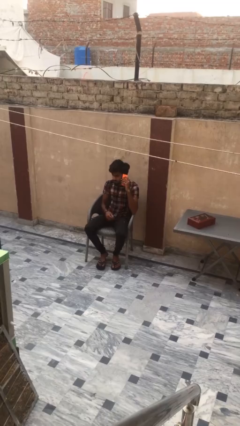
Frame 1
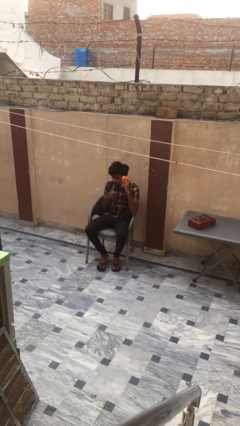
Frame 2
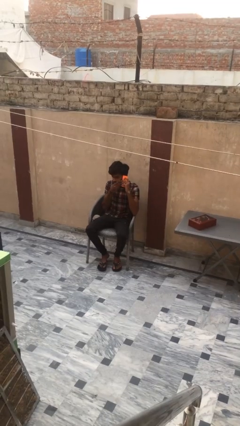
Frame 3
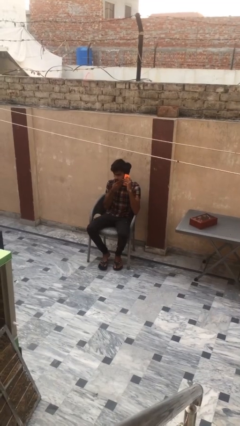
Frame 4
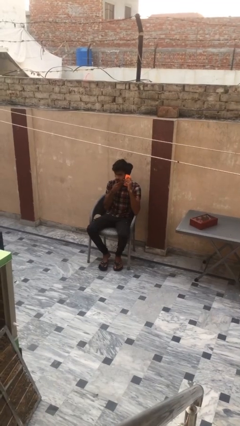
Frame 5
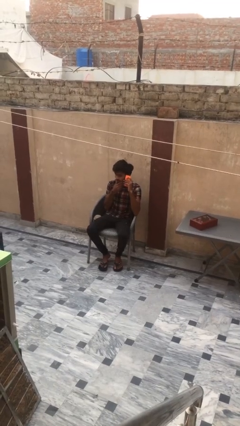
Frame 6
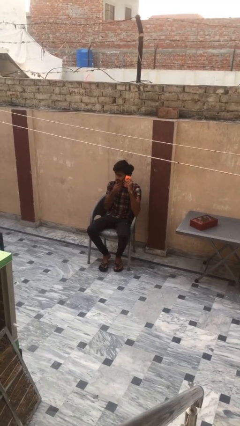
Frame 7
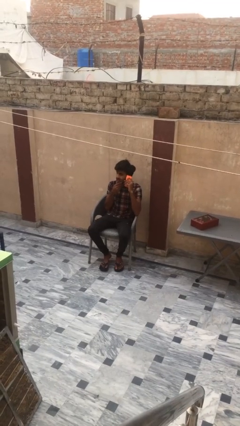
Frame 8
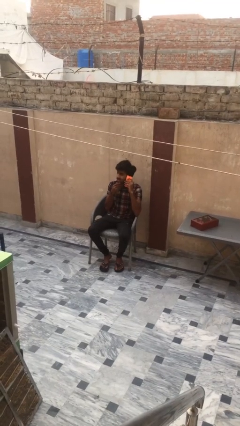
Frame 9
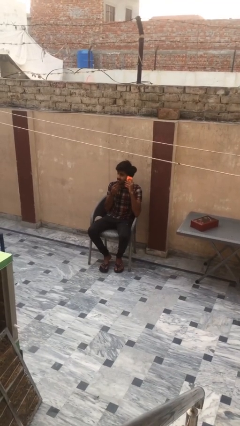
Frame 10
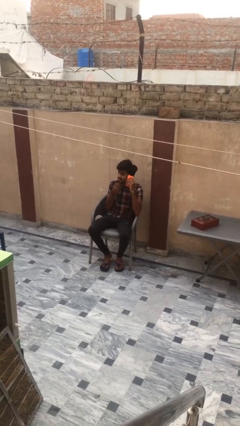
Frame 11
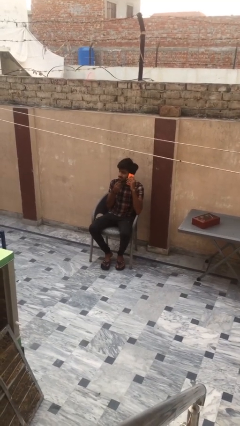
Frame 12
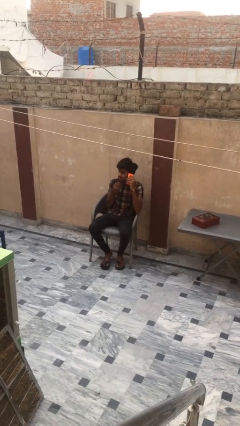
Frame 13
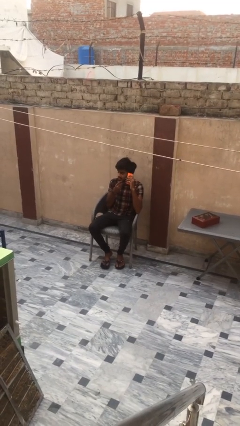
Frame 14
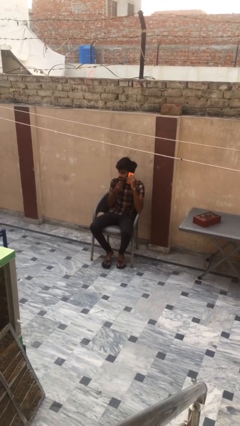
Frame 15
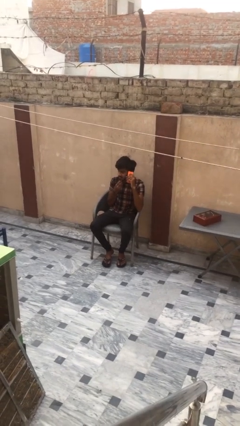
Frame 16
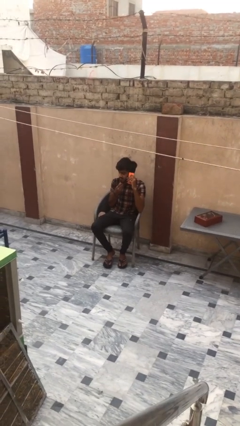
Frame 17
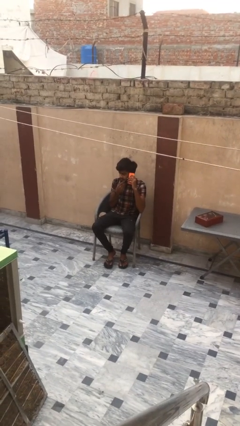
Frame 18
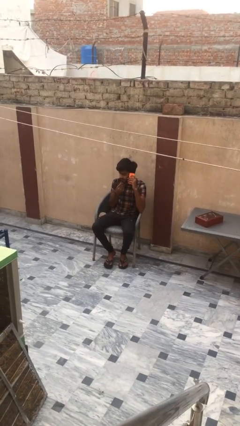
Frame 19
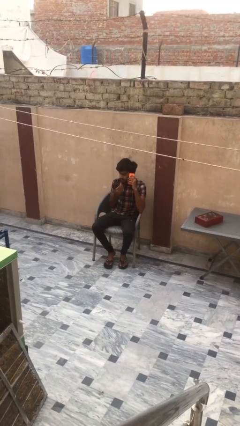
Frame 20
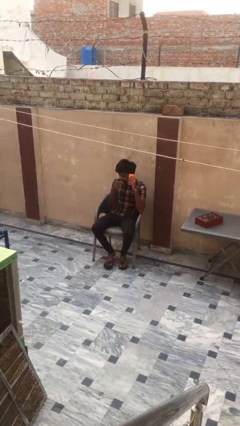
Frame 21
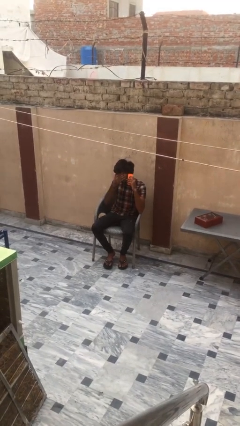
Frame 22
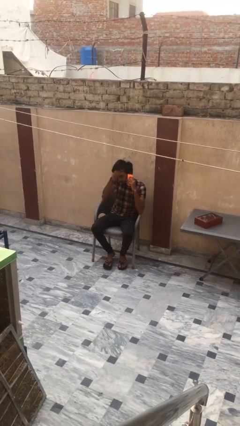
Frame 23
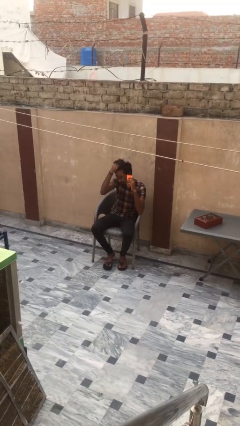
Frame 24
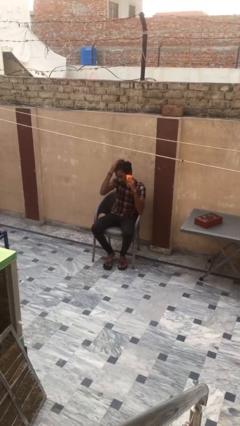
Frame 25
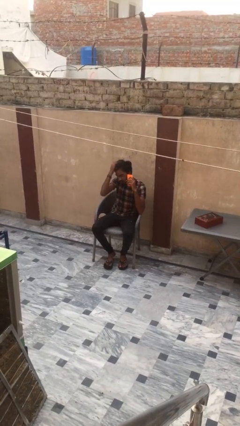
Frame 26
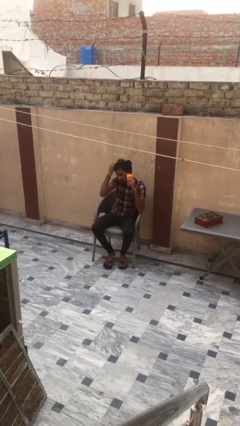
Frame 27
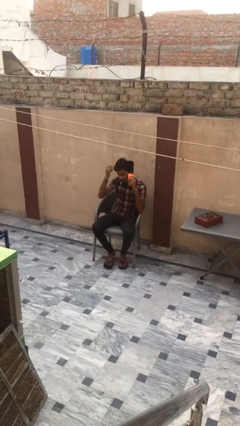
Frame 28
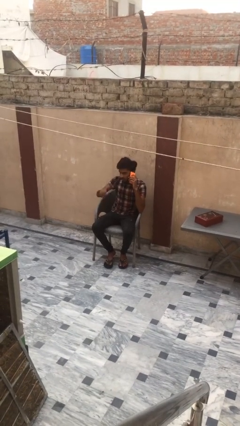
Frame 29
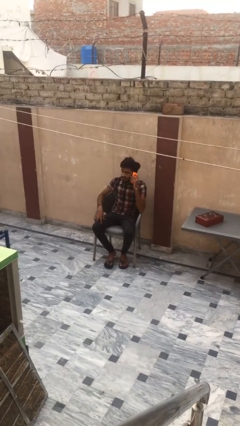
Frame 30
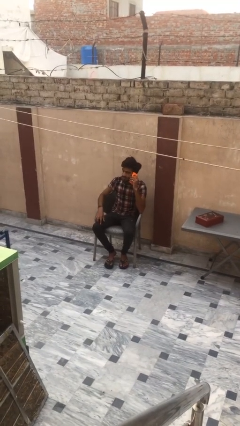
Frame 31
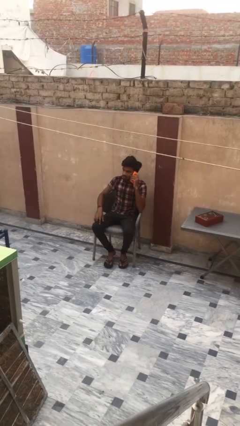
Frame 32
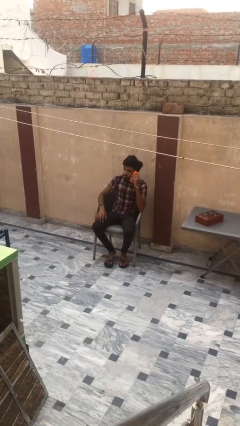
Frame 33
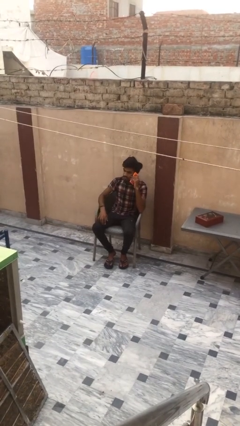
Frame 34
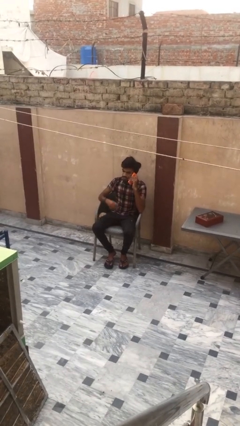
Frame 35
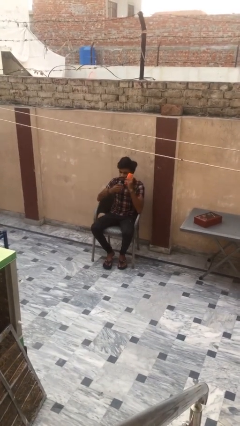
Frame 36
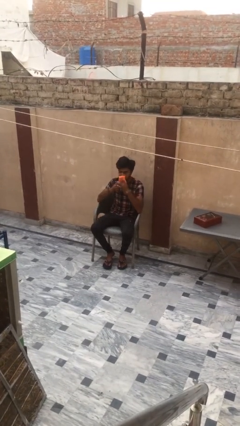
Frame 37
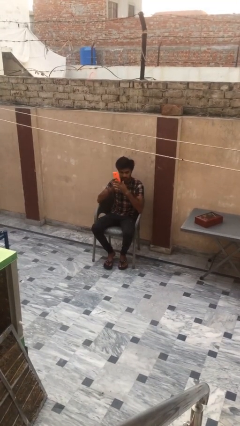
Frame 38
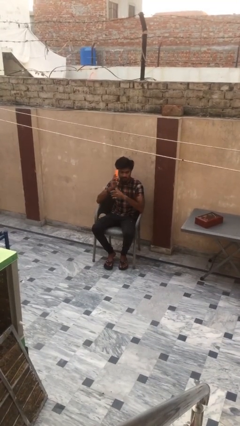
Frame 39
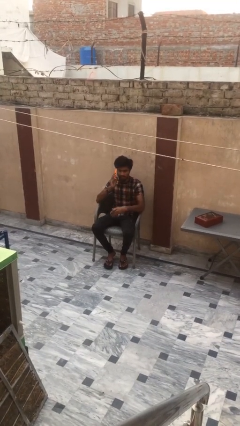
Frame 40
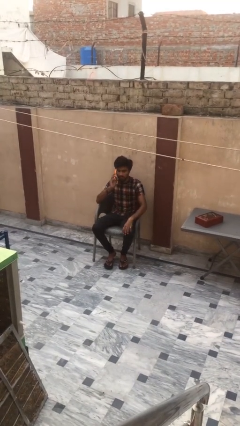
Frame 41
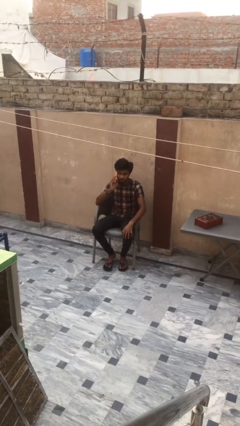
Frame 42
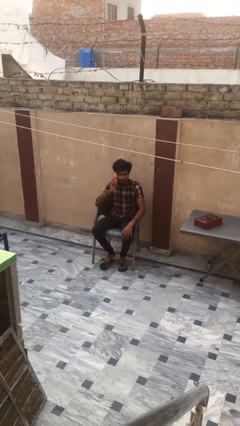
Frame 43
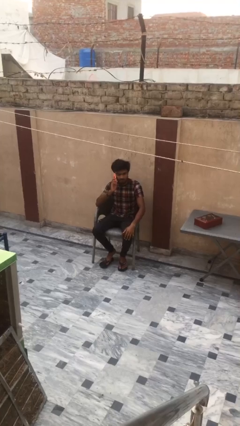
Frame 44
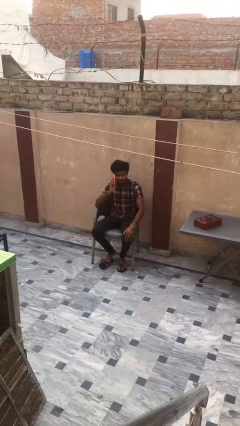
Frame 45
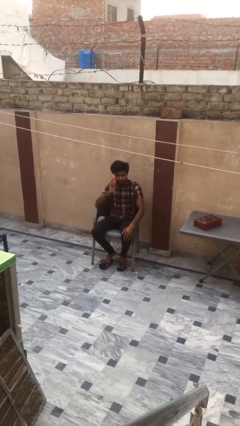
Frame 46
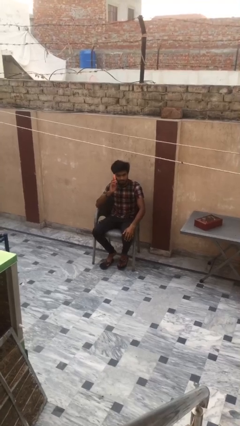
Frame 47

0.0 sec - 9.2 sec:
person talks on phone

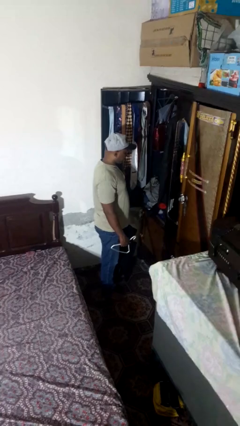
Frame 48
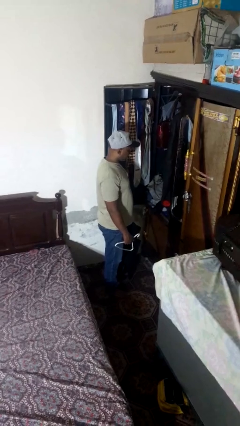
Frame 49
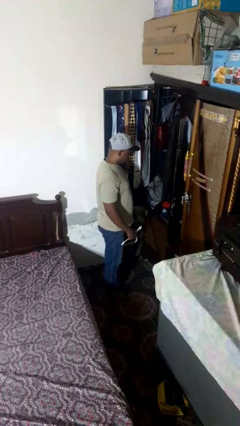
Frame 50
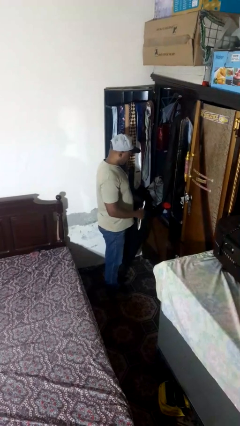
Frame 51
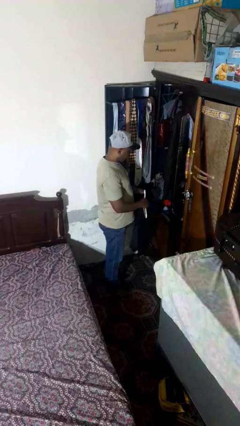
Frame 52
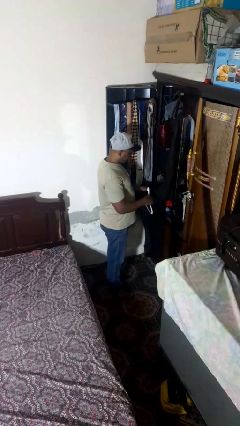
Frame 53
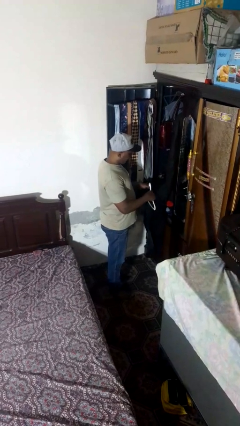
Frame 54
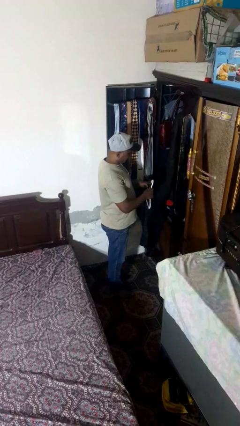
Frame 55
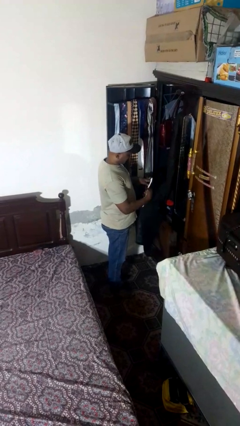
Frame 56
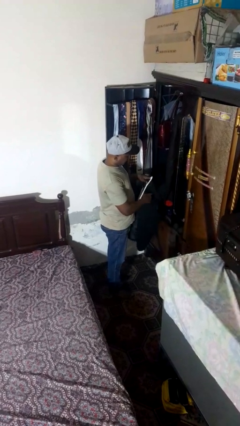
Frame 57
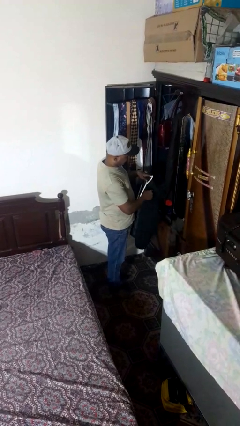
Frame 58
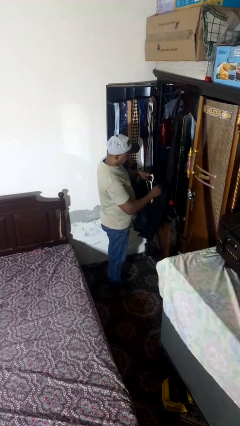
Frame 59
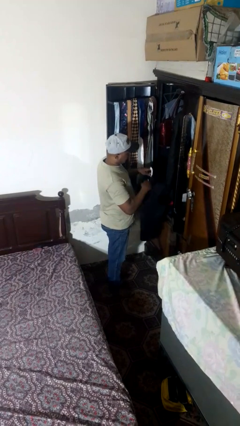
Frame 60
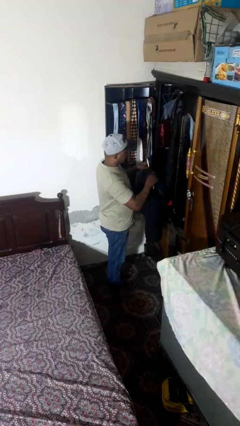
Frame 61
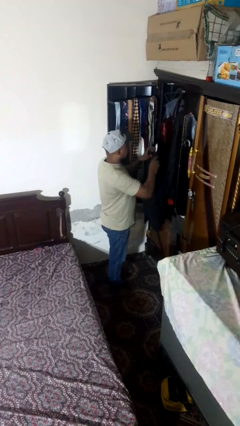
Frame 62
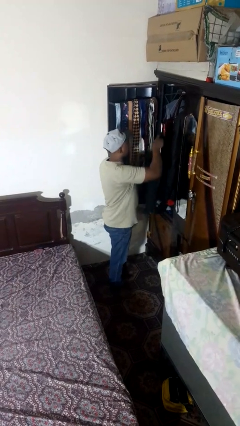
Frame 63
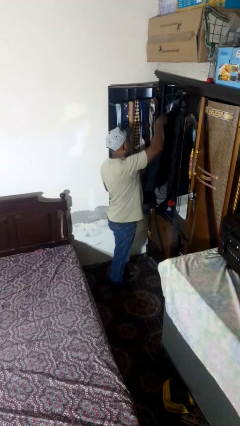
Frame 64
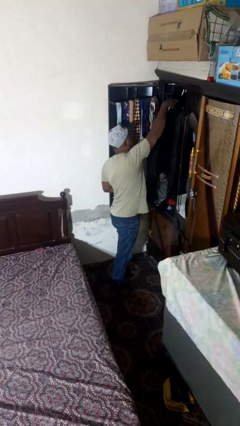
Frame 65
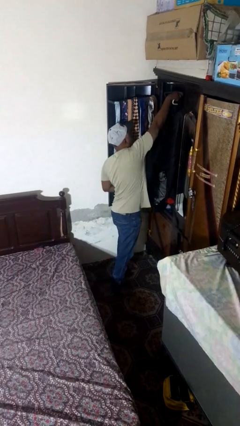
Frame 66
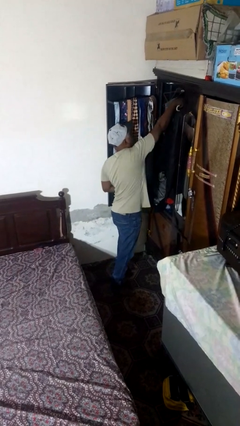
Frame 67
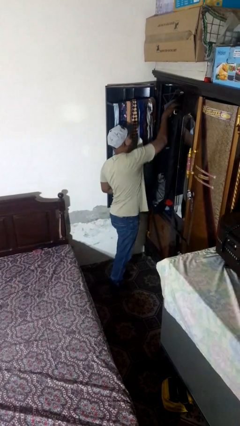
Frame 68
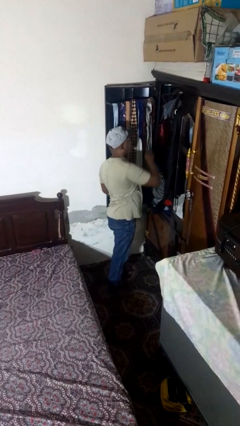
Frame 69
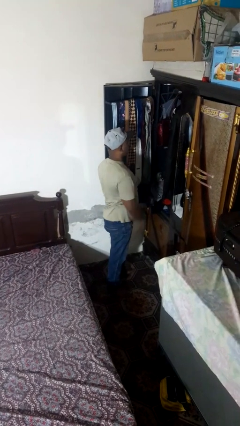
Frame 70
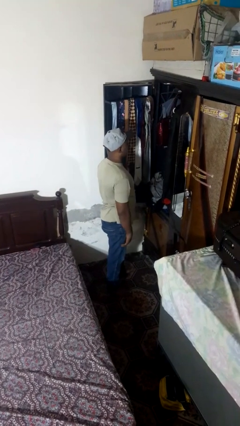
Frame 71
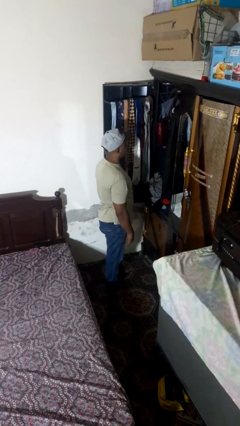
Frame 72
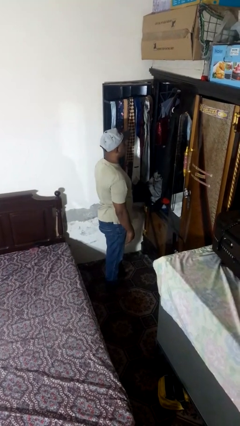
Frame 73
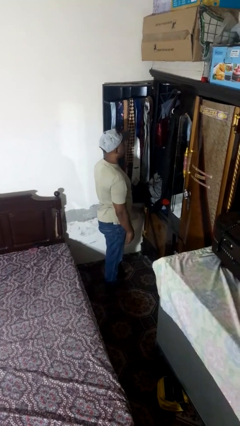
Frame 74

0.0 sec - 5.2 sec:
person puts clothes into closet

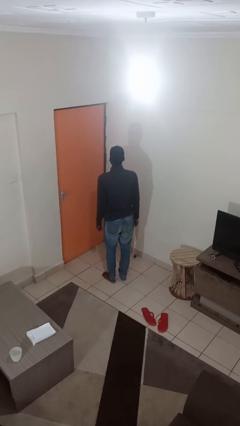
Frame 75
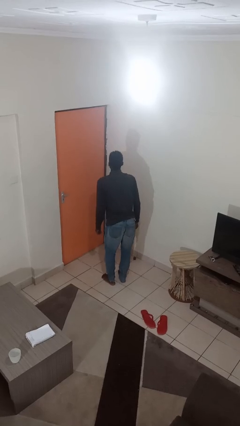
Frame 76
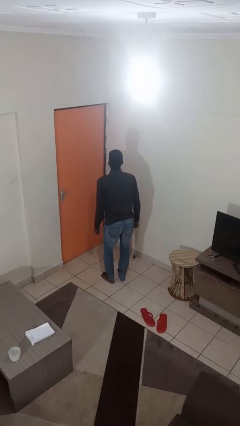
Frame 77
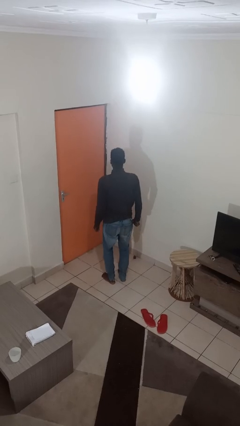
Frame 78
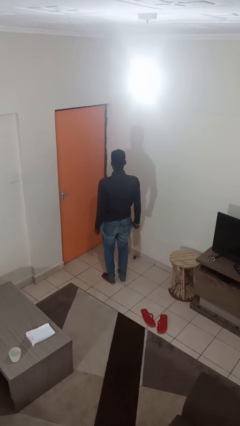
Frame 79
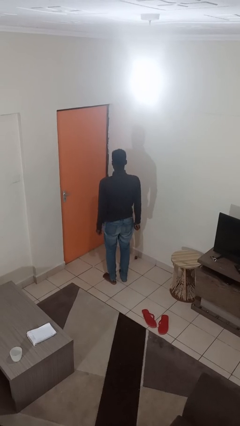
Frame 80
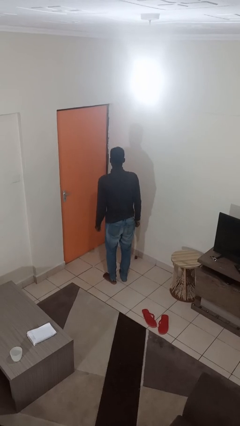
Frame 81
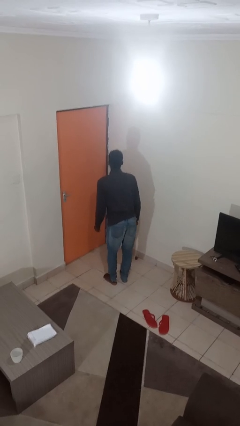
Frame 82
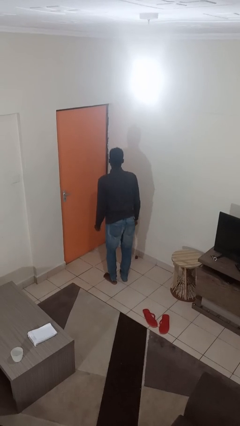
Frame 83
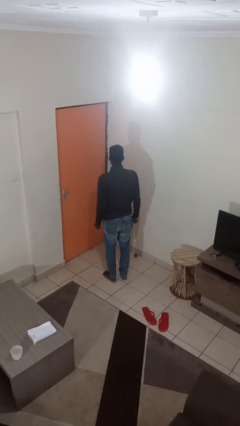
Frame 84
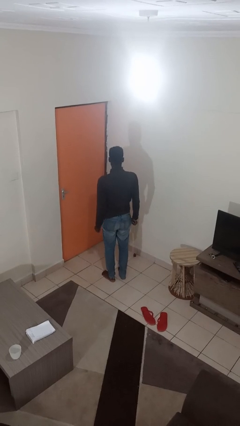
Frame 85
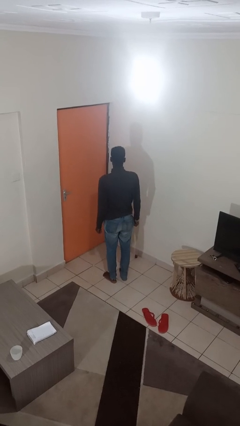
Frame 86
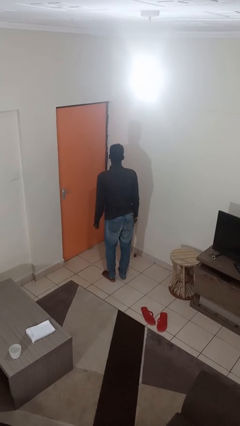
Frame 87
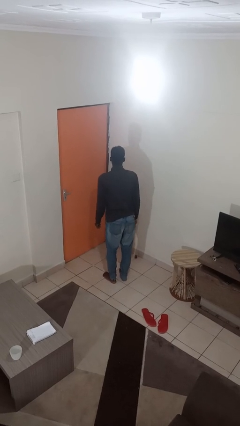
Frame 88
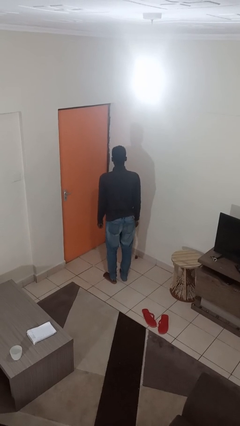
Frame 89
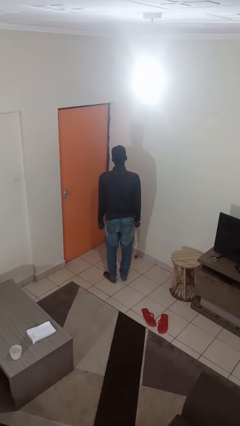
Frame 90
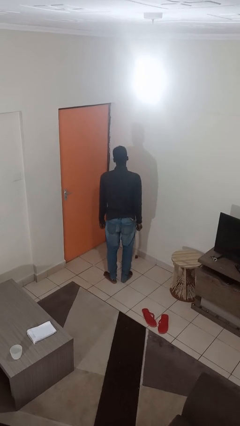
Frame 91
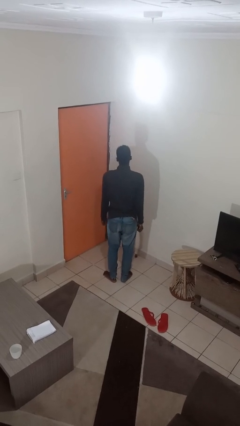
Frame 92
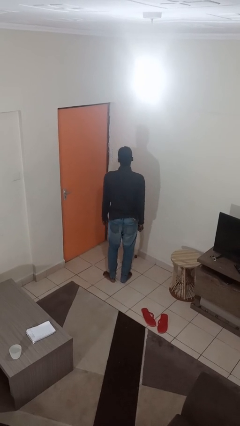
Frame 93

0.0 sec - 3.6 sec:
person wiggles hips
